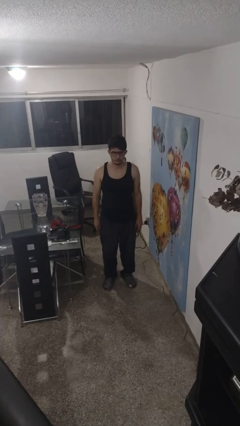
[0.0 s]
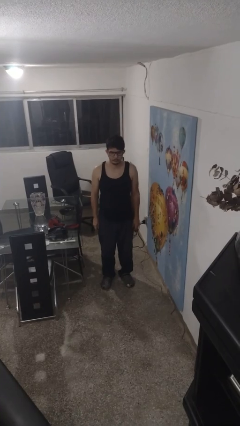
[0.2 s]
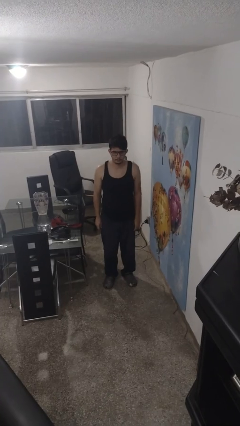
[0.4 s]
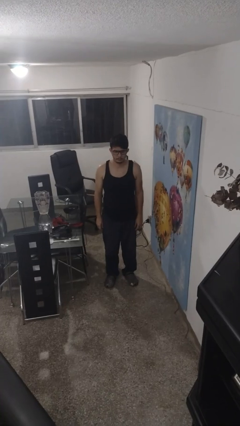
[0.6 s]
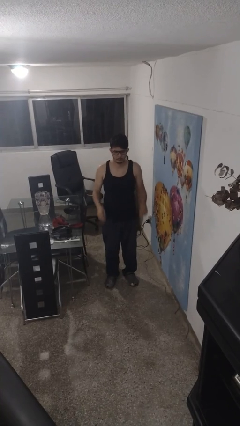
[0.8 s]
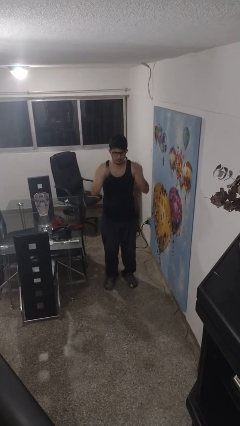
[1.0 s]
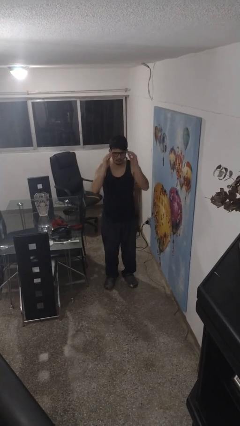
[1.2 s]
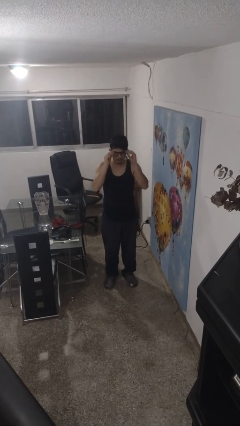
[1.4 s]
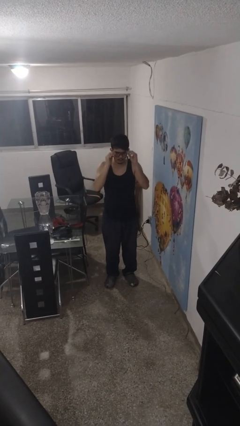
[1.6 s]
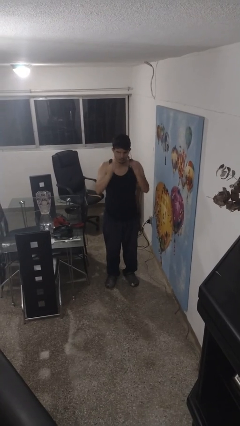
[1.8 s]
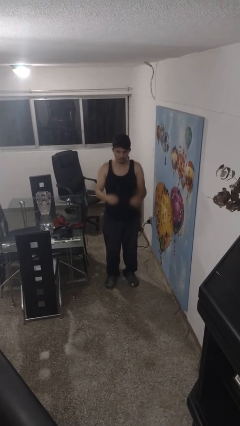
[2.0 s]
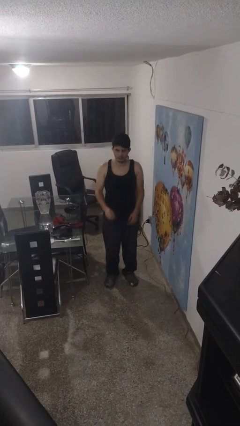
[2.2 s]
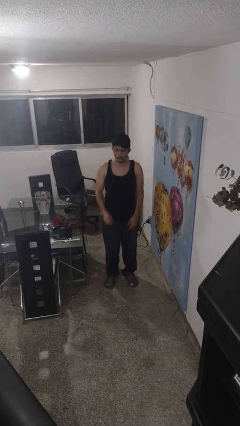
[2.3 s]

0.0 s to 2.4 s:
person takes off glasses

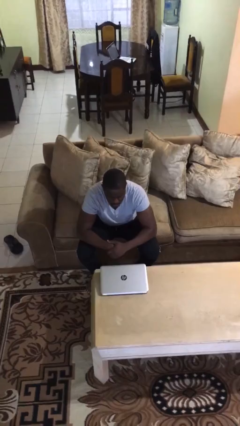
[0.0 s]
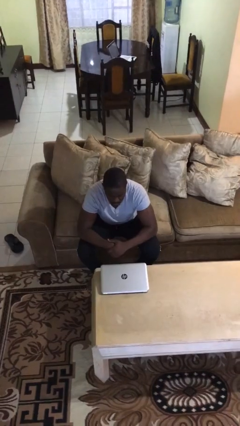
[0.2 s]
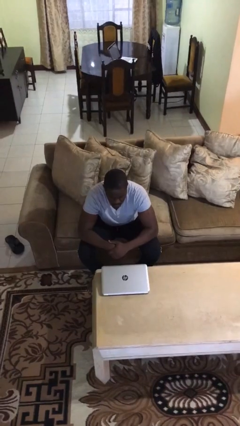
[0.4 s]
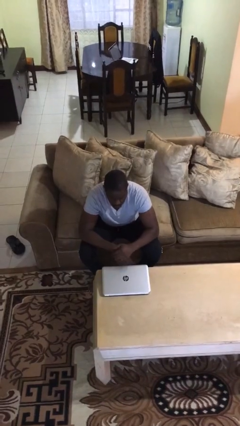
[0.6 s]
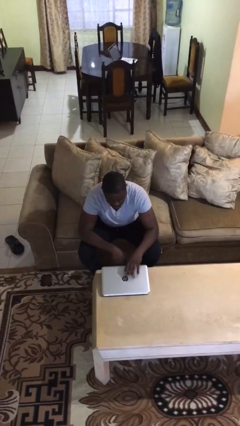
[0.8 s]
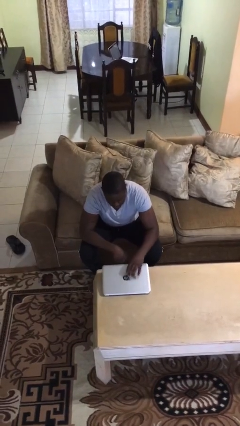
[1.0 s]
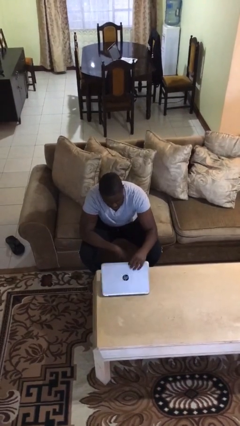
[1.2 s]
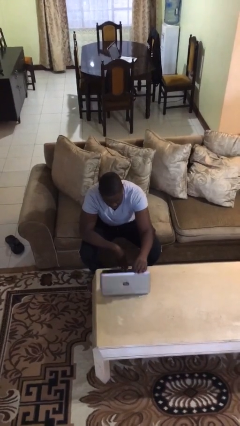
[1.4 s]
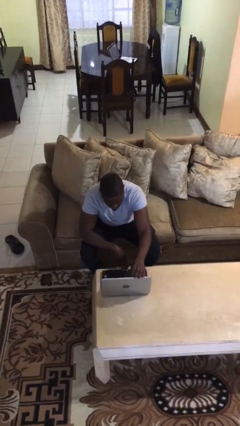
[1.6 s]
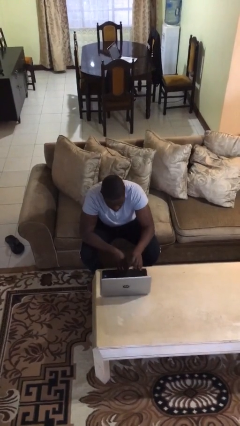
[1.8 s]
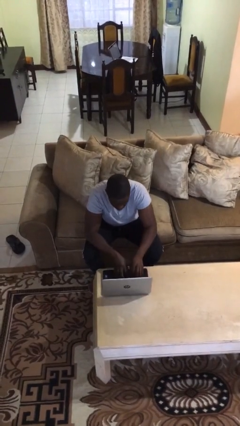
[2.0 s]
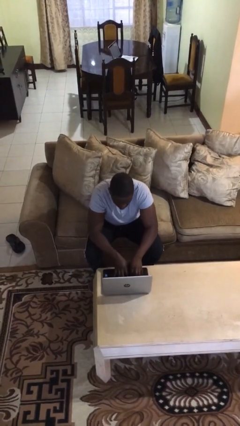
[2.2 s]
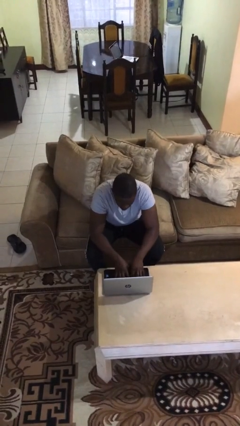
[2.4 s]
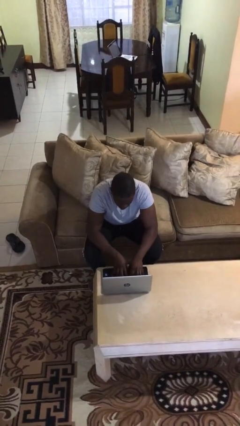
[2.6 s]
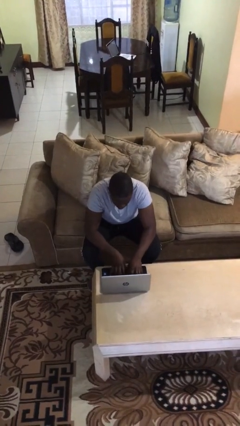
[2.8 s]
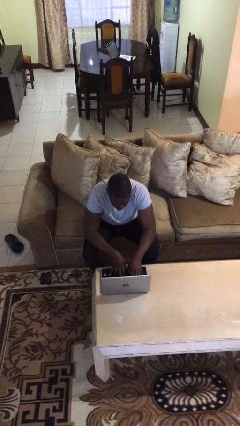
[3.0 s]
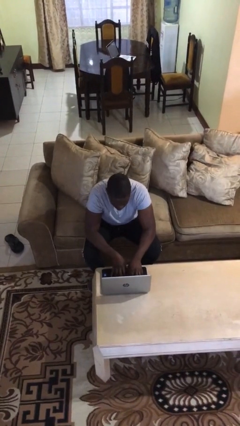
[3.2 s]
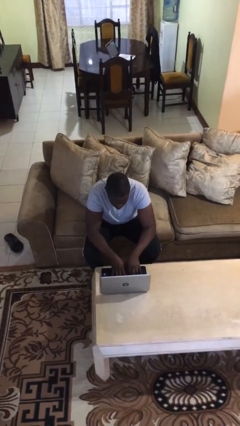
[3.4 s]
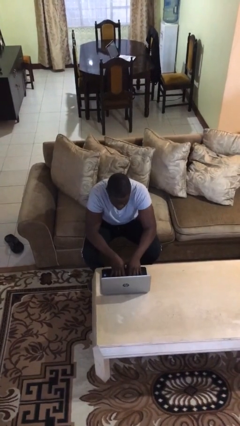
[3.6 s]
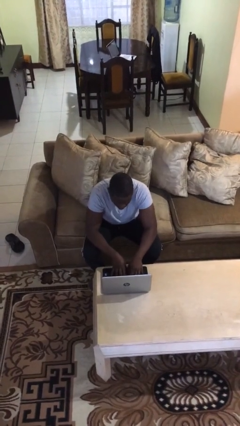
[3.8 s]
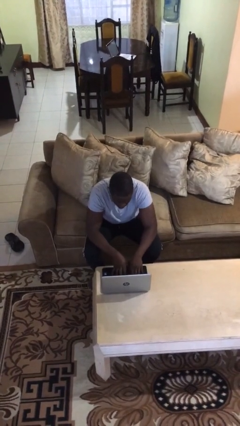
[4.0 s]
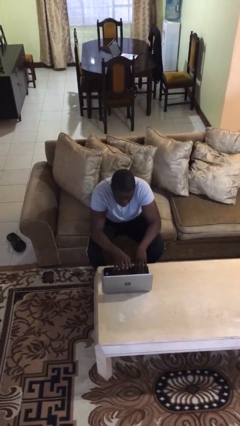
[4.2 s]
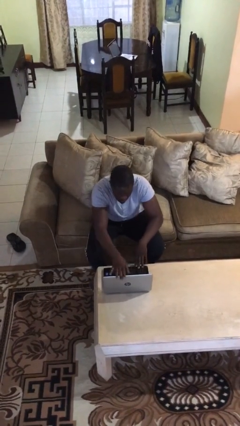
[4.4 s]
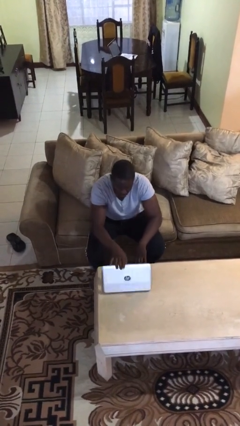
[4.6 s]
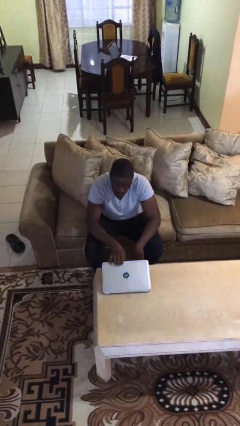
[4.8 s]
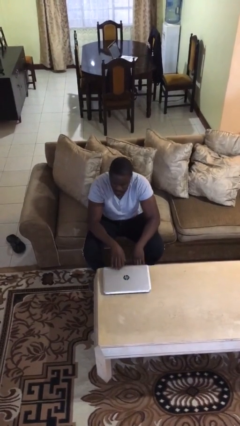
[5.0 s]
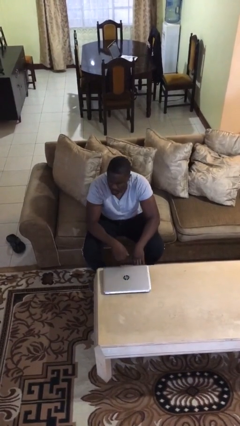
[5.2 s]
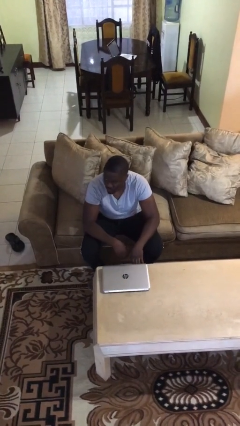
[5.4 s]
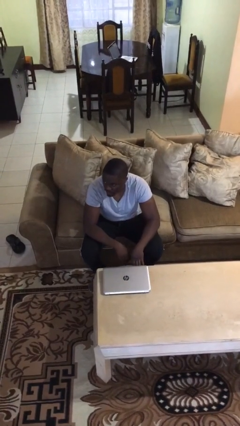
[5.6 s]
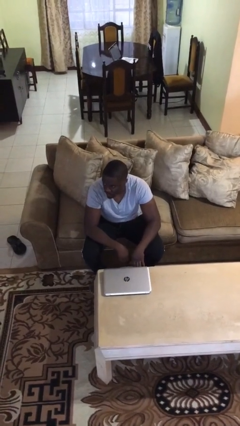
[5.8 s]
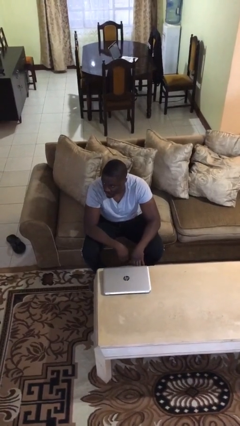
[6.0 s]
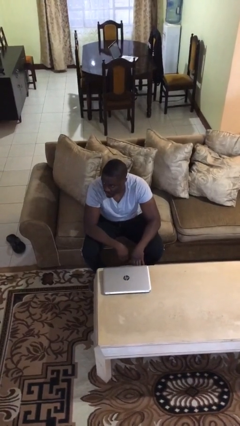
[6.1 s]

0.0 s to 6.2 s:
person interacts with laptop

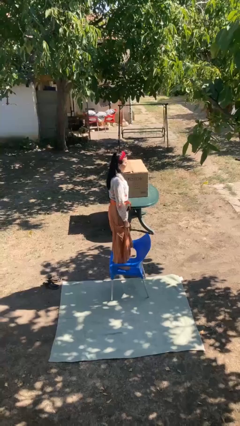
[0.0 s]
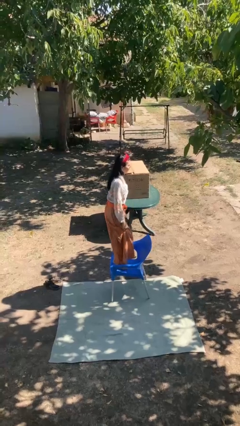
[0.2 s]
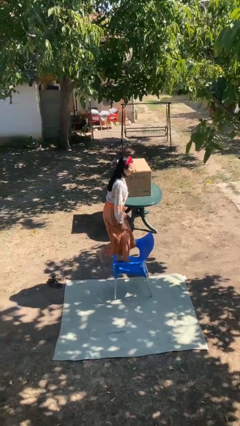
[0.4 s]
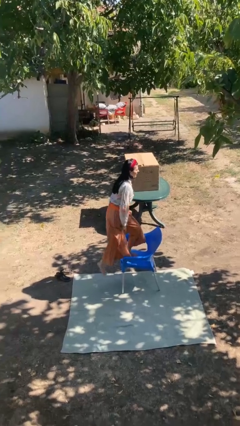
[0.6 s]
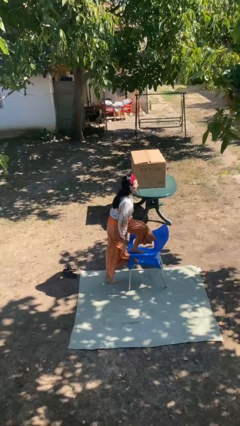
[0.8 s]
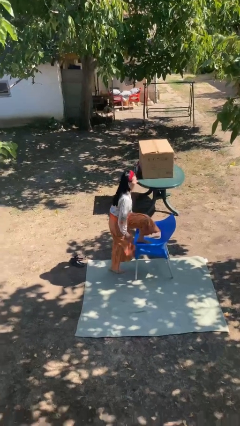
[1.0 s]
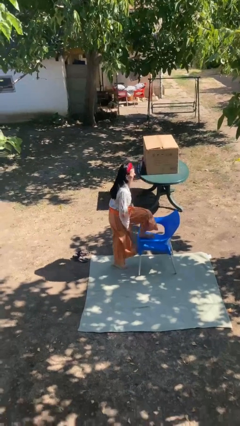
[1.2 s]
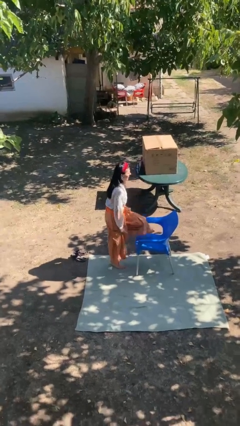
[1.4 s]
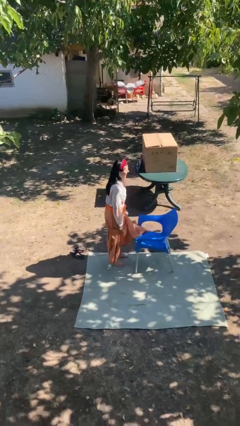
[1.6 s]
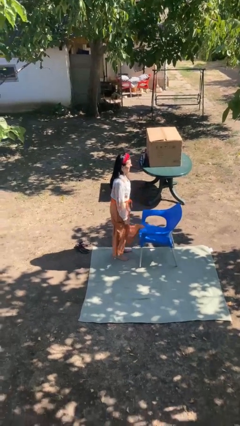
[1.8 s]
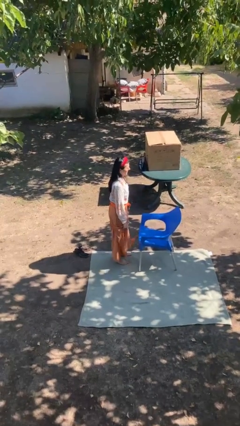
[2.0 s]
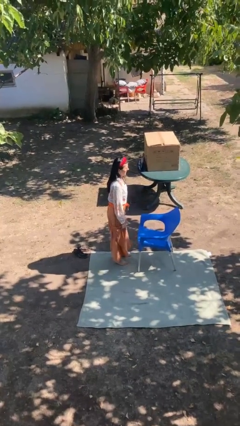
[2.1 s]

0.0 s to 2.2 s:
person climbs off chair

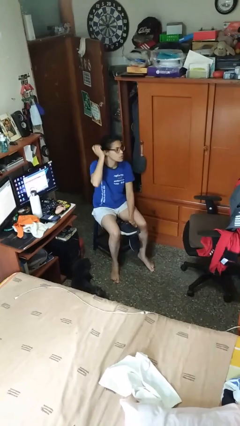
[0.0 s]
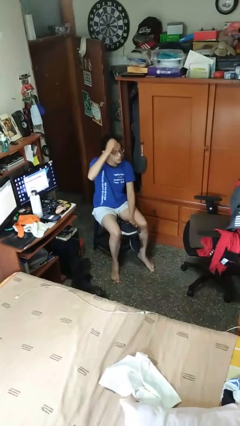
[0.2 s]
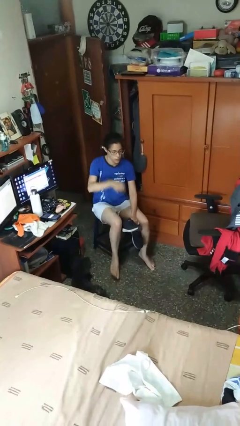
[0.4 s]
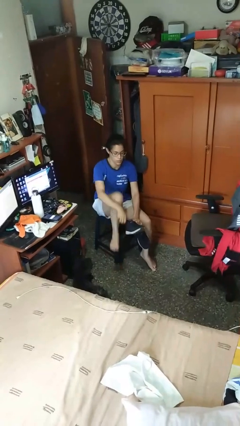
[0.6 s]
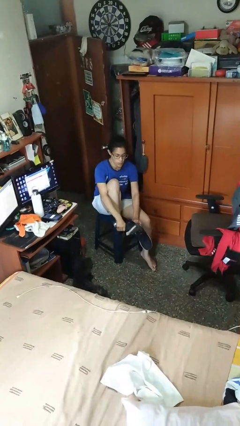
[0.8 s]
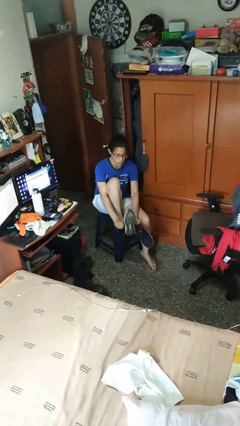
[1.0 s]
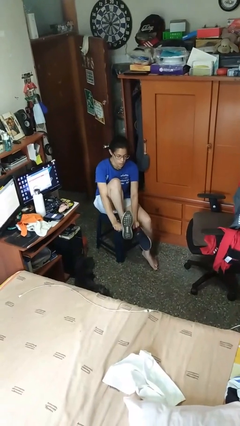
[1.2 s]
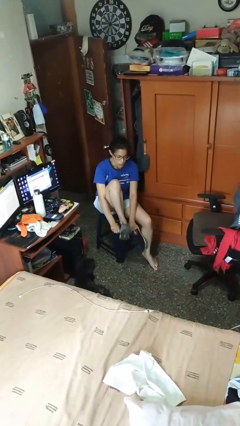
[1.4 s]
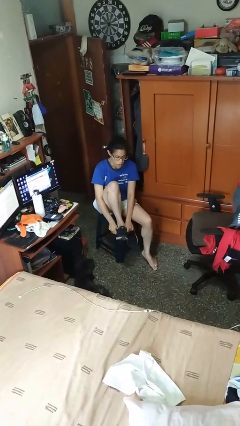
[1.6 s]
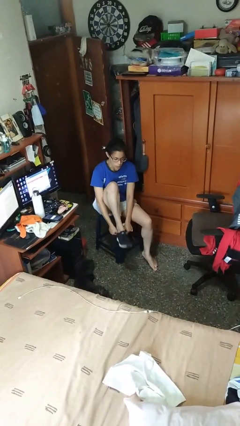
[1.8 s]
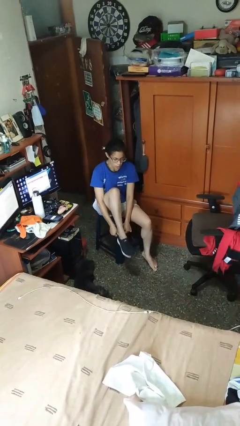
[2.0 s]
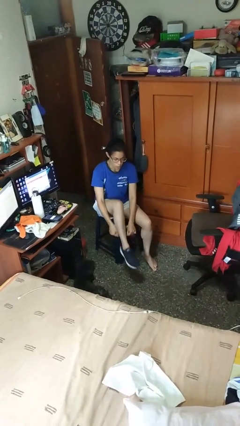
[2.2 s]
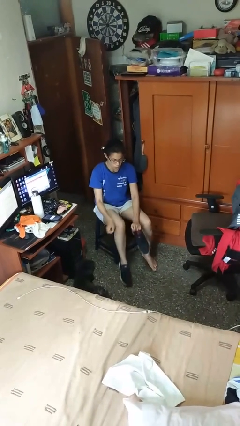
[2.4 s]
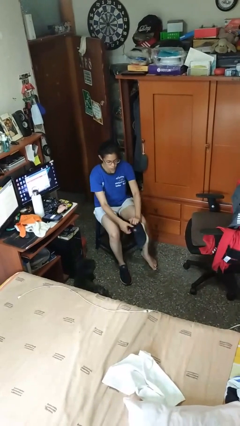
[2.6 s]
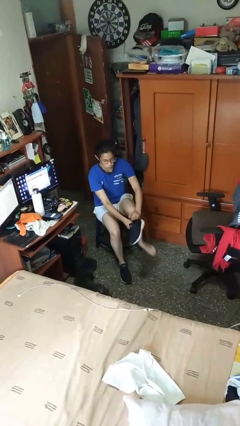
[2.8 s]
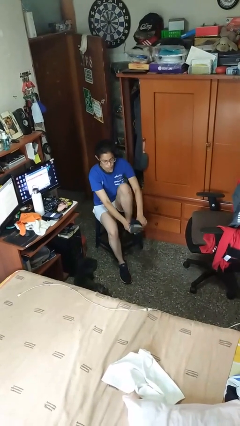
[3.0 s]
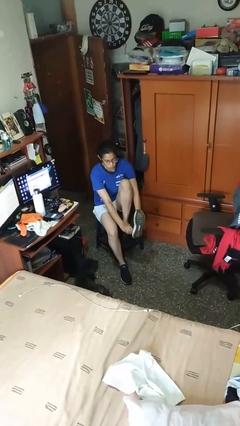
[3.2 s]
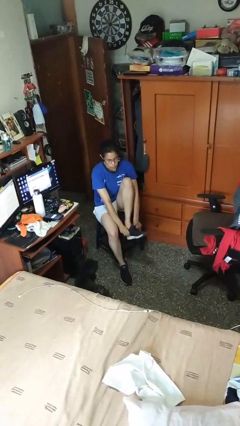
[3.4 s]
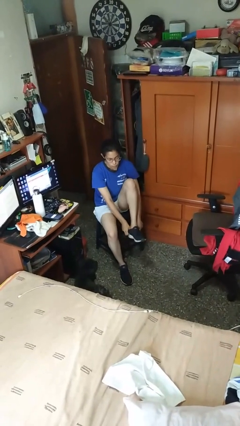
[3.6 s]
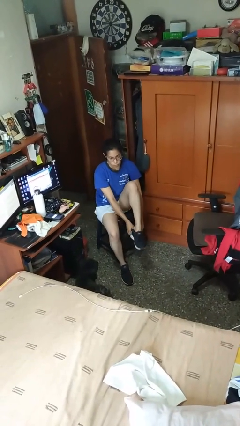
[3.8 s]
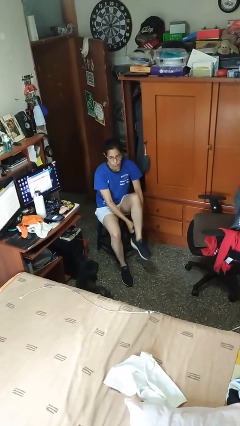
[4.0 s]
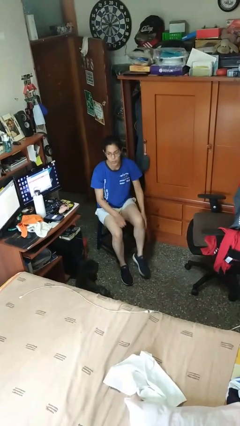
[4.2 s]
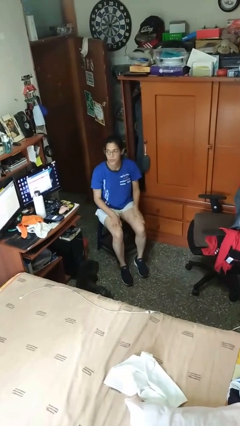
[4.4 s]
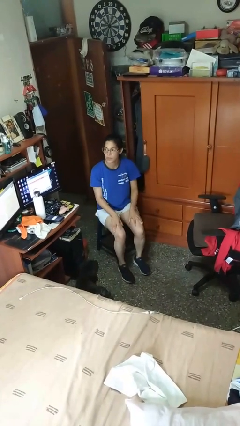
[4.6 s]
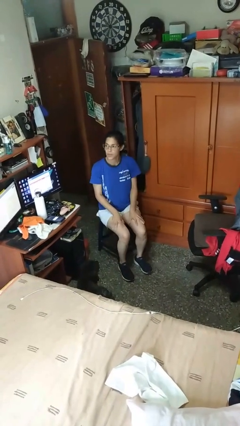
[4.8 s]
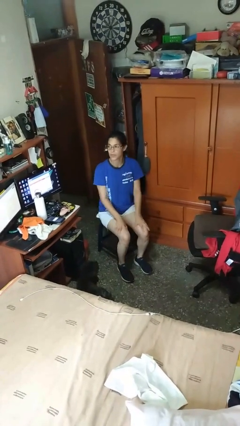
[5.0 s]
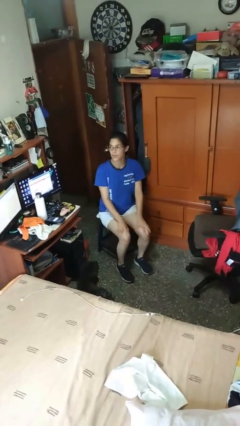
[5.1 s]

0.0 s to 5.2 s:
person puts on shoes

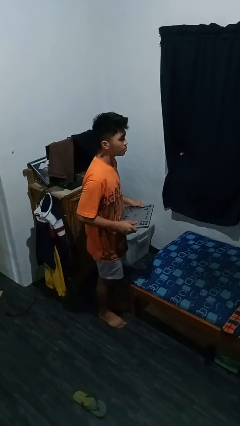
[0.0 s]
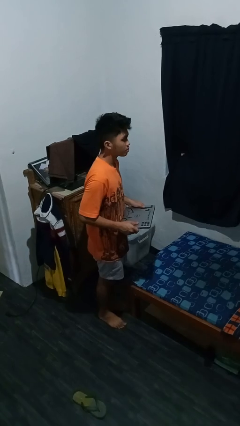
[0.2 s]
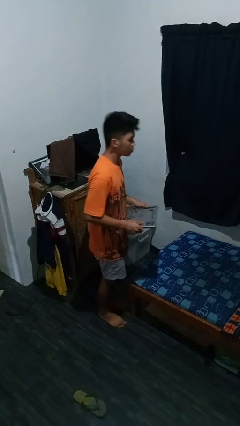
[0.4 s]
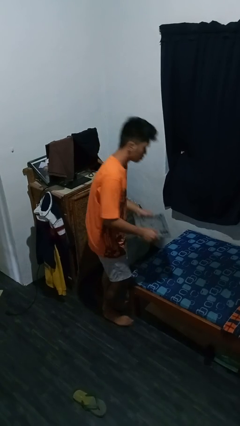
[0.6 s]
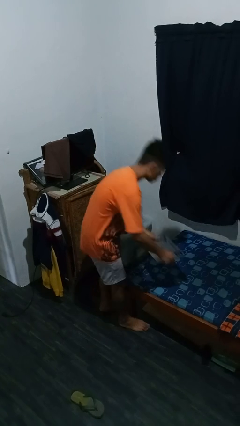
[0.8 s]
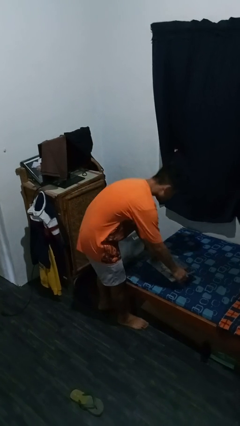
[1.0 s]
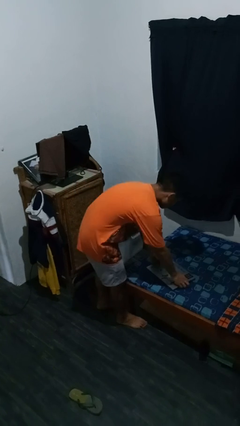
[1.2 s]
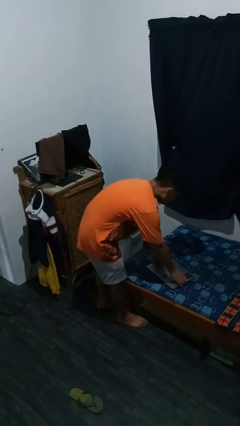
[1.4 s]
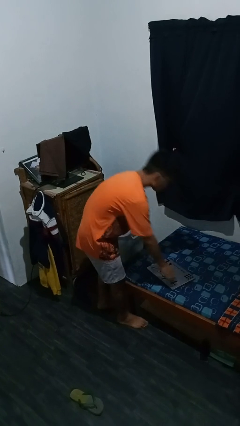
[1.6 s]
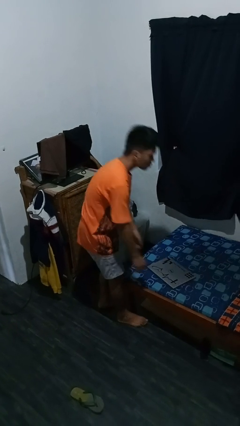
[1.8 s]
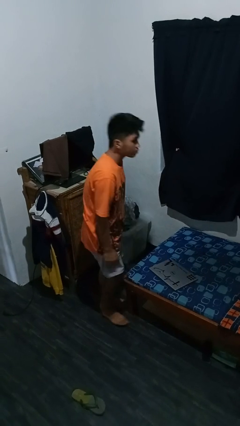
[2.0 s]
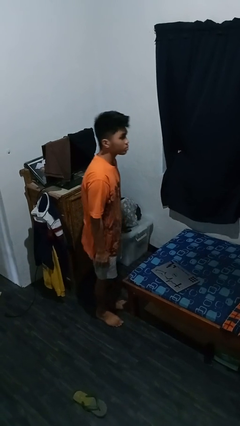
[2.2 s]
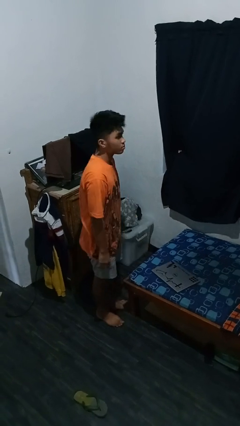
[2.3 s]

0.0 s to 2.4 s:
person puts down object on bed
